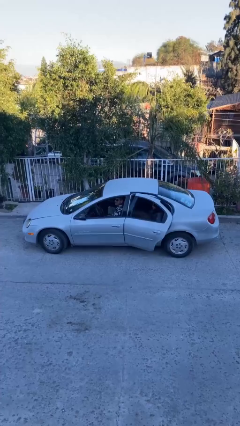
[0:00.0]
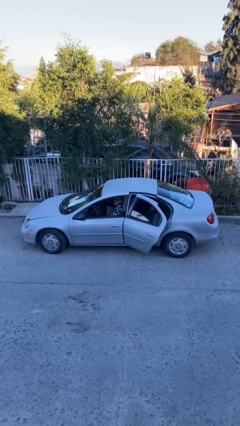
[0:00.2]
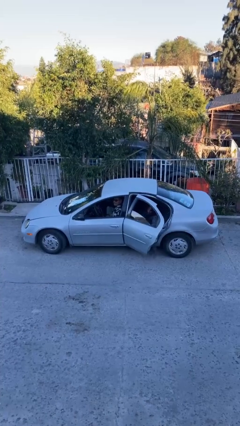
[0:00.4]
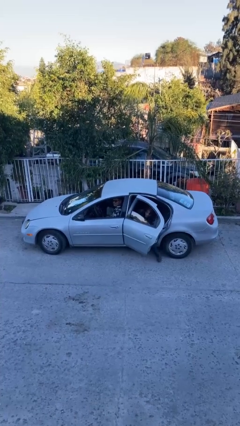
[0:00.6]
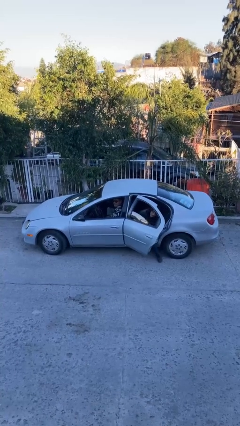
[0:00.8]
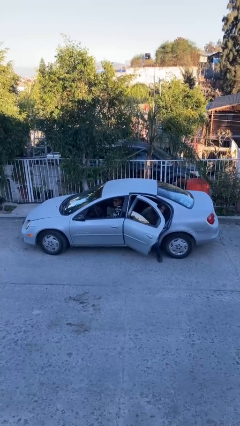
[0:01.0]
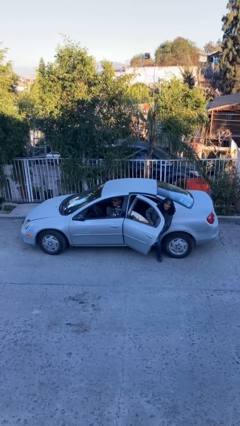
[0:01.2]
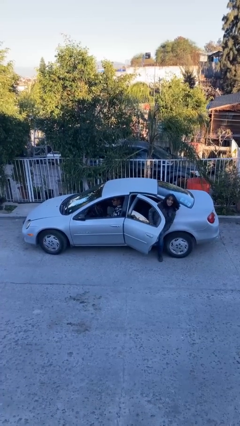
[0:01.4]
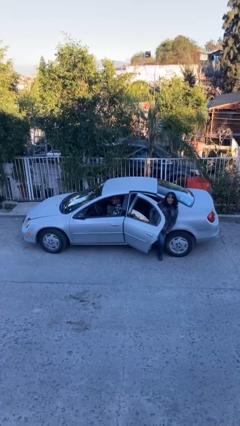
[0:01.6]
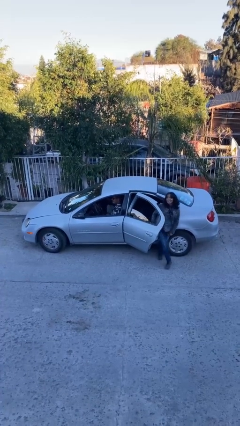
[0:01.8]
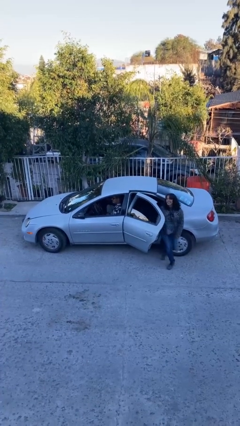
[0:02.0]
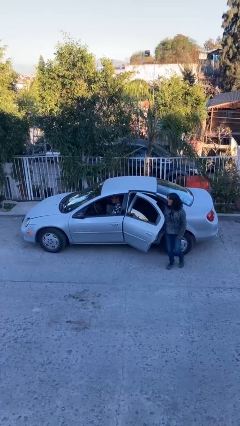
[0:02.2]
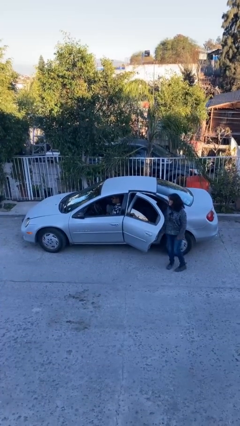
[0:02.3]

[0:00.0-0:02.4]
car drops off person

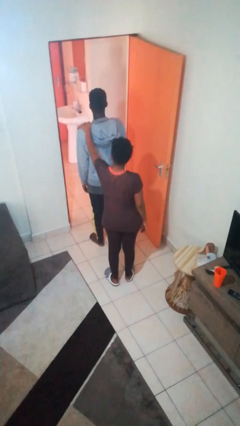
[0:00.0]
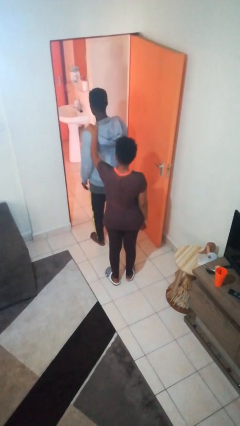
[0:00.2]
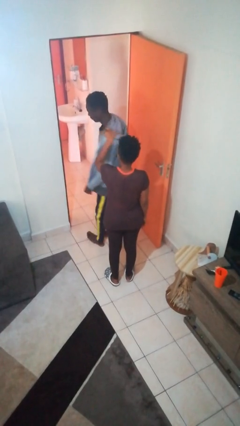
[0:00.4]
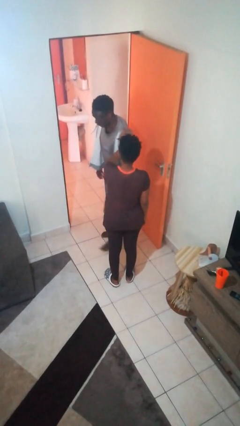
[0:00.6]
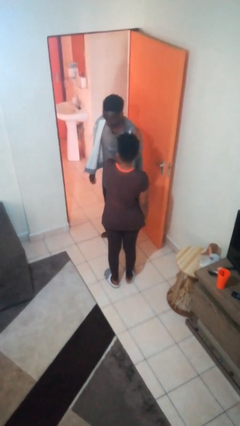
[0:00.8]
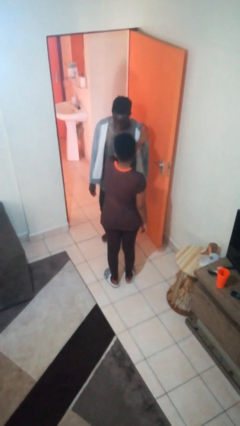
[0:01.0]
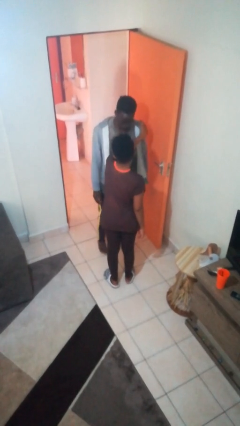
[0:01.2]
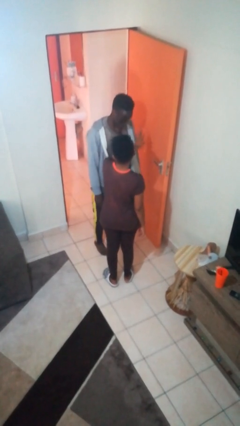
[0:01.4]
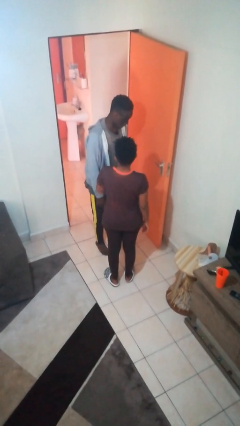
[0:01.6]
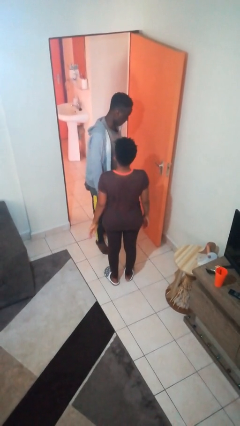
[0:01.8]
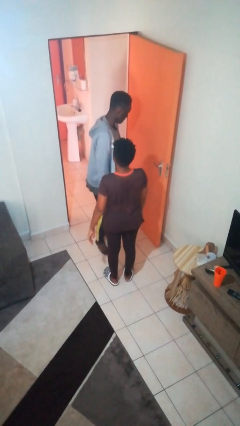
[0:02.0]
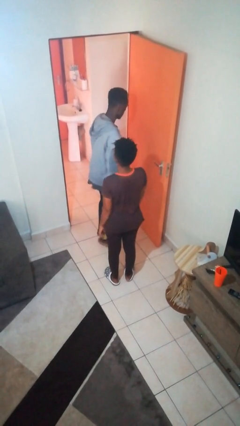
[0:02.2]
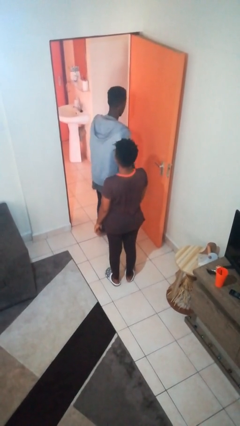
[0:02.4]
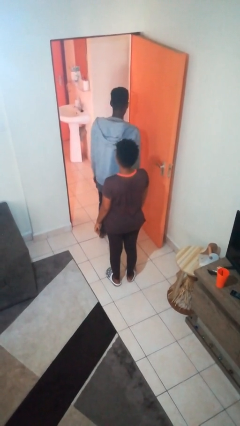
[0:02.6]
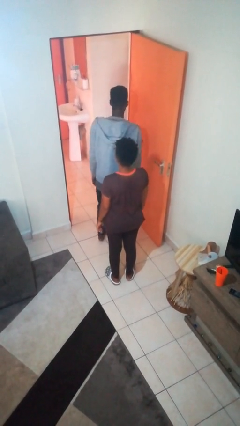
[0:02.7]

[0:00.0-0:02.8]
person spins person around

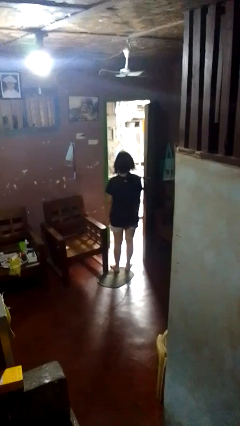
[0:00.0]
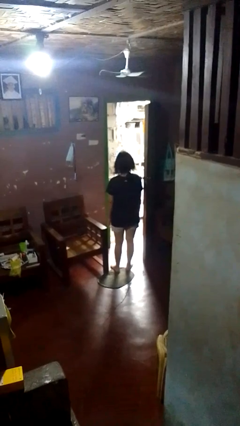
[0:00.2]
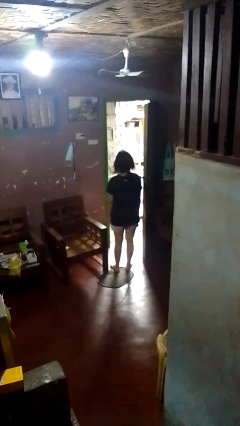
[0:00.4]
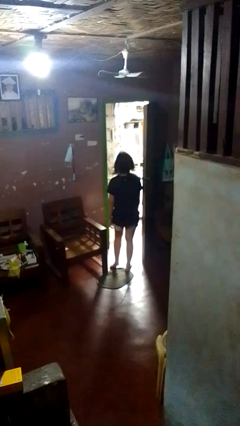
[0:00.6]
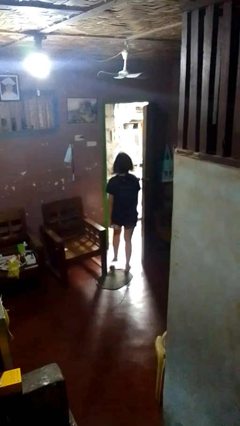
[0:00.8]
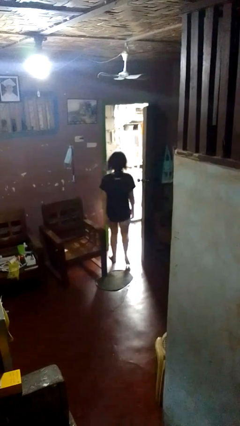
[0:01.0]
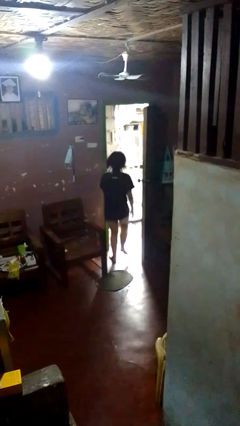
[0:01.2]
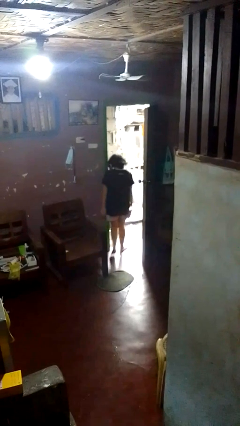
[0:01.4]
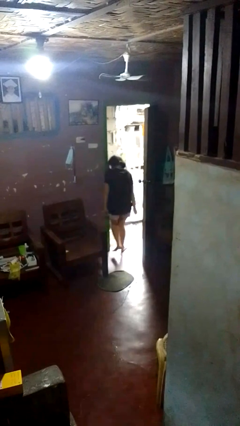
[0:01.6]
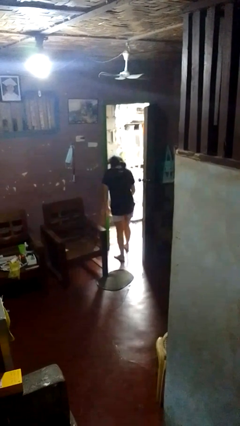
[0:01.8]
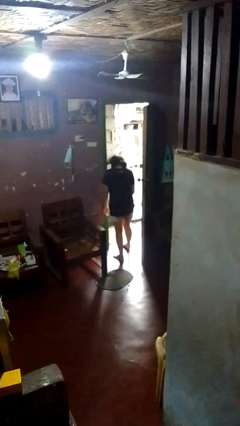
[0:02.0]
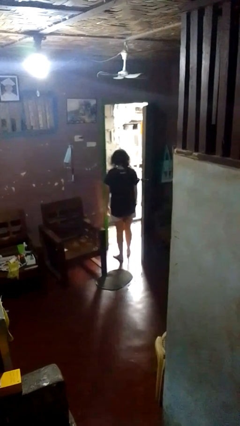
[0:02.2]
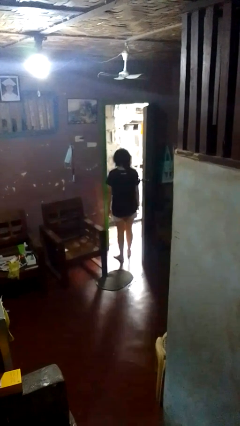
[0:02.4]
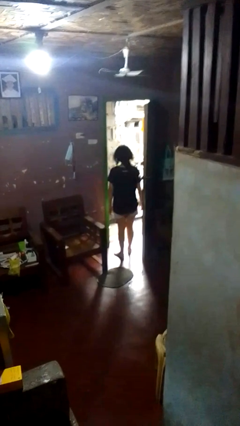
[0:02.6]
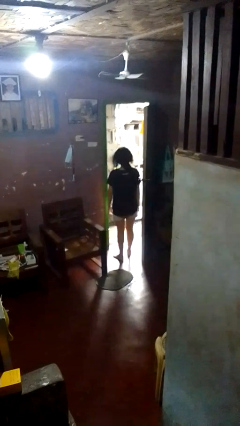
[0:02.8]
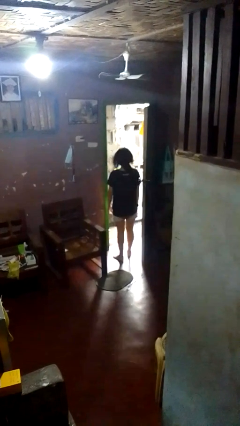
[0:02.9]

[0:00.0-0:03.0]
person bumps into wall

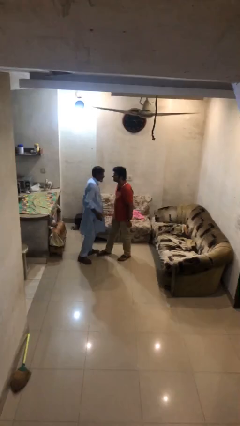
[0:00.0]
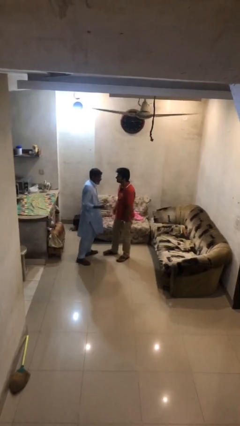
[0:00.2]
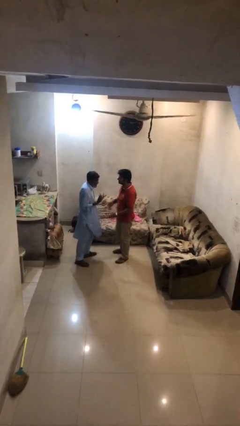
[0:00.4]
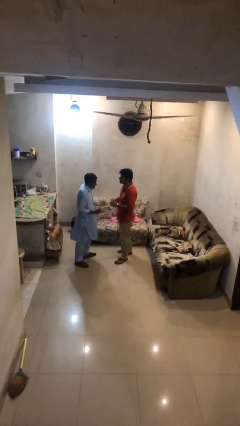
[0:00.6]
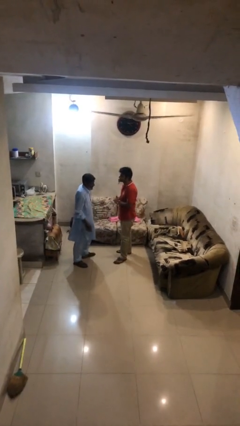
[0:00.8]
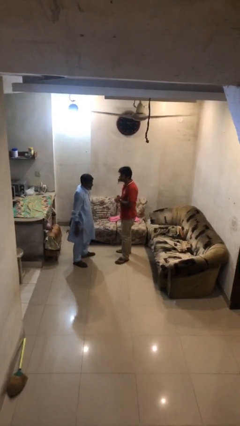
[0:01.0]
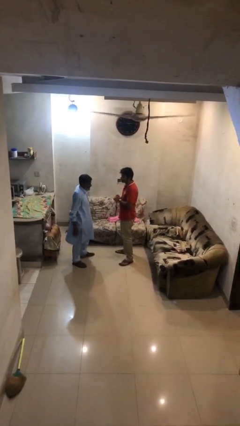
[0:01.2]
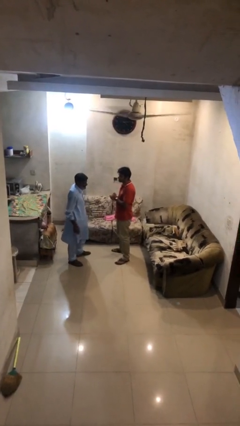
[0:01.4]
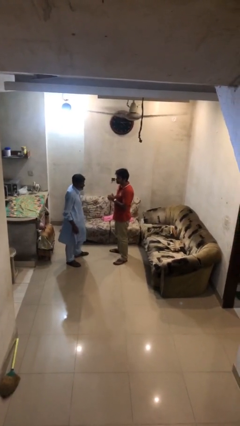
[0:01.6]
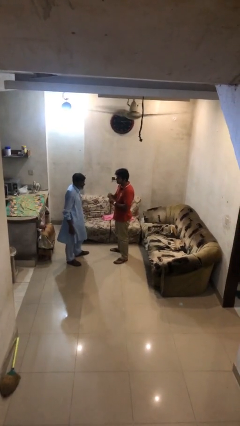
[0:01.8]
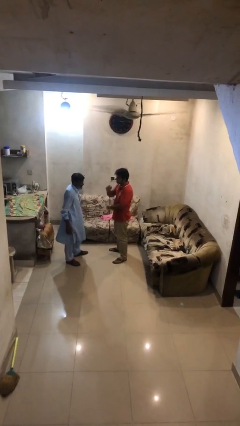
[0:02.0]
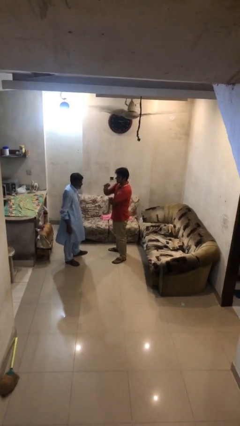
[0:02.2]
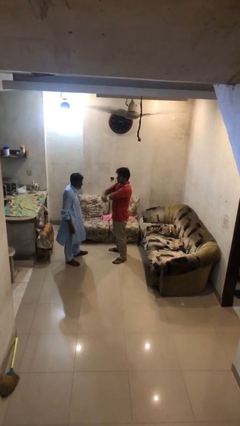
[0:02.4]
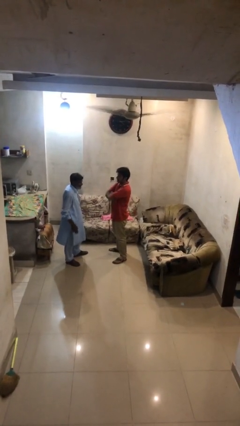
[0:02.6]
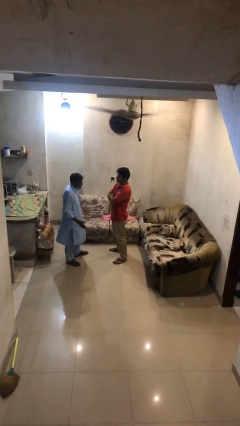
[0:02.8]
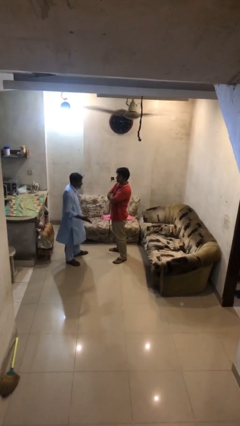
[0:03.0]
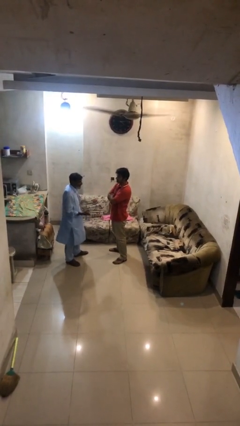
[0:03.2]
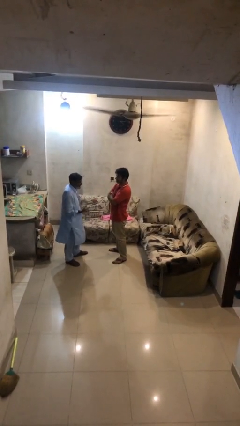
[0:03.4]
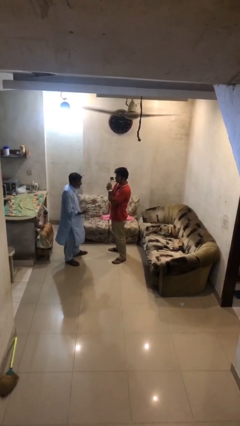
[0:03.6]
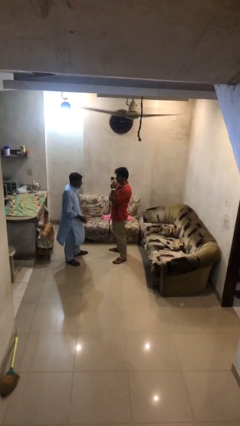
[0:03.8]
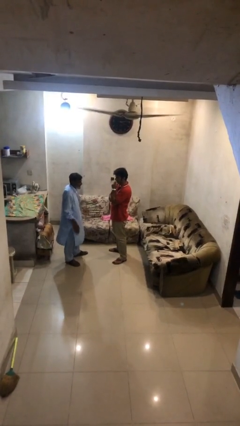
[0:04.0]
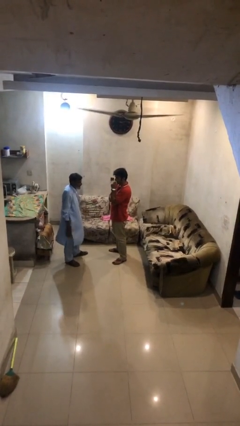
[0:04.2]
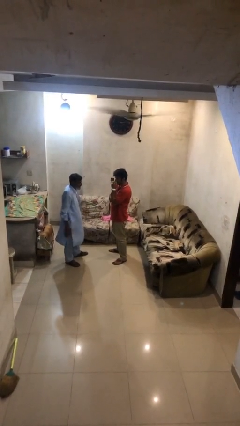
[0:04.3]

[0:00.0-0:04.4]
person talks to person

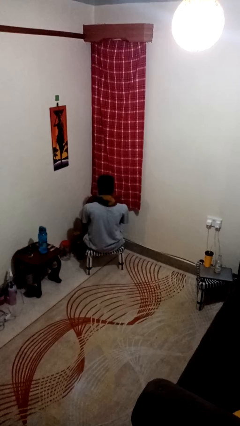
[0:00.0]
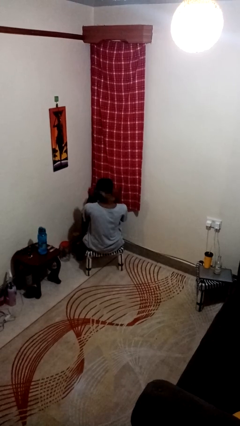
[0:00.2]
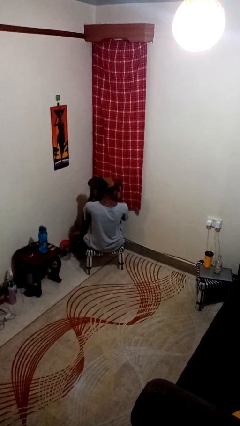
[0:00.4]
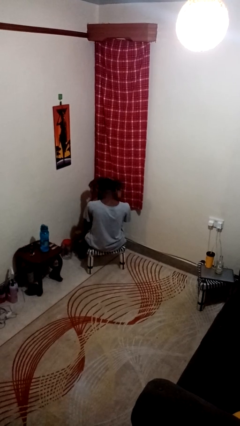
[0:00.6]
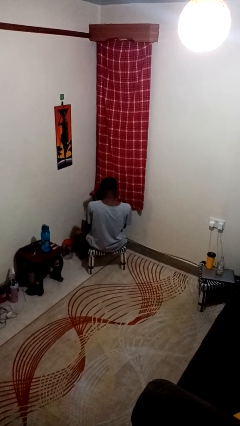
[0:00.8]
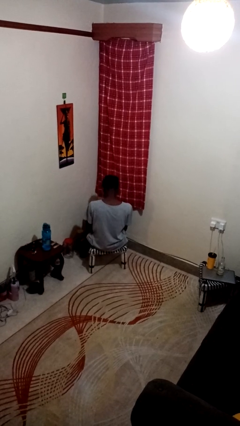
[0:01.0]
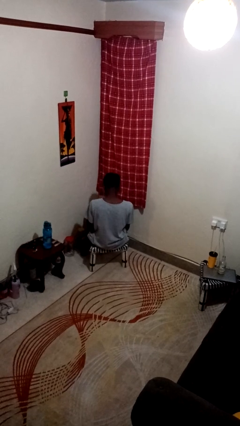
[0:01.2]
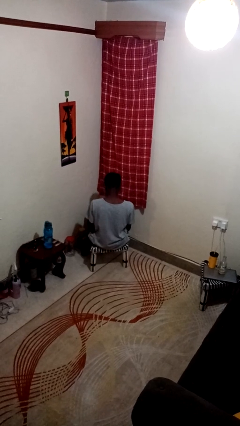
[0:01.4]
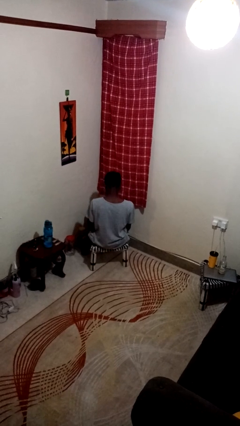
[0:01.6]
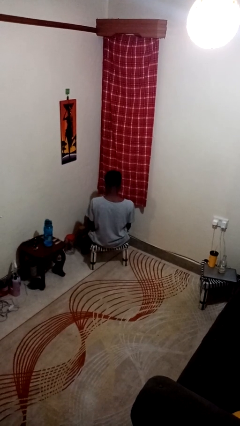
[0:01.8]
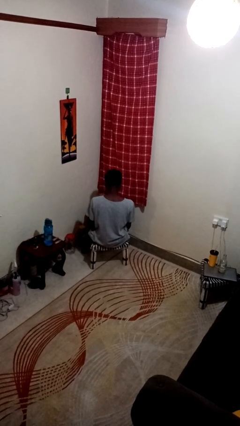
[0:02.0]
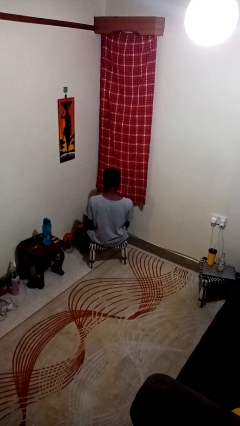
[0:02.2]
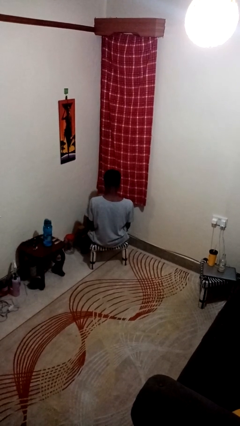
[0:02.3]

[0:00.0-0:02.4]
person takes off scarf

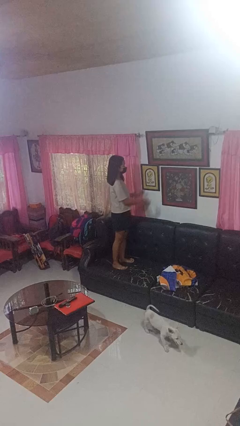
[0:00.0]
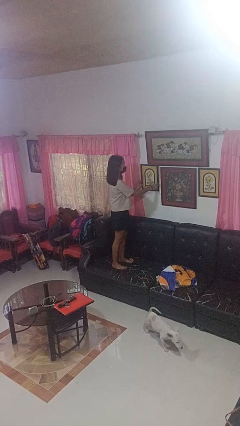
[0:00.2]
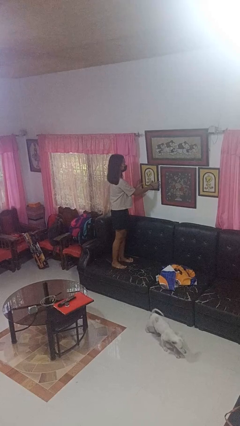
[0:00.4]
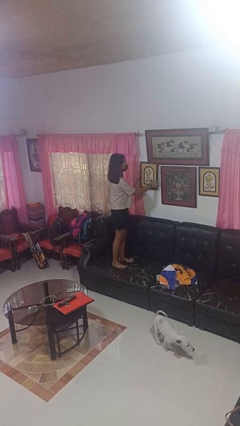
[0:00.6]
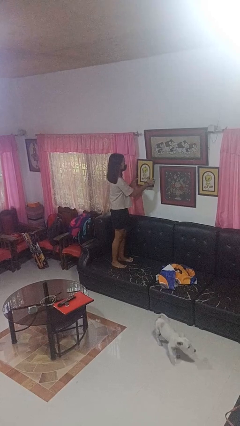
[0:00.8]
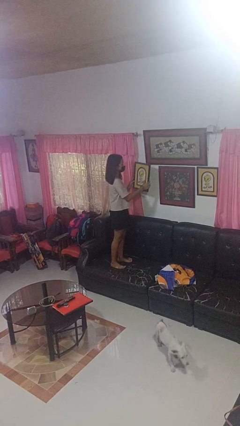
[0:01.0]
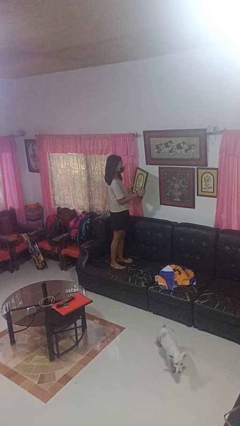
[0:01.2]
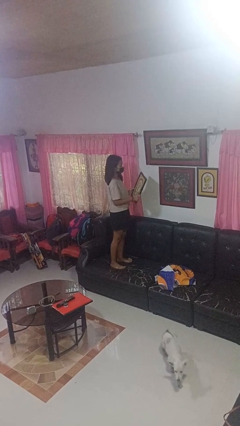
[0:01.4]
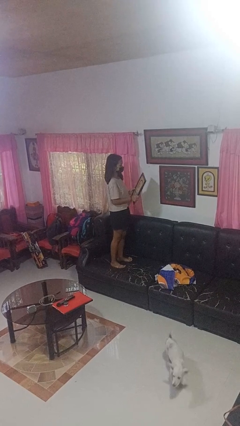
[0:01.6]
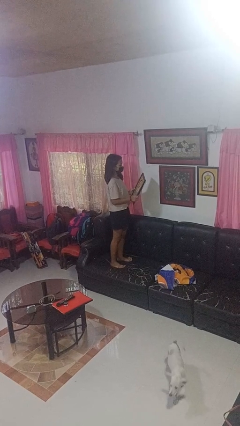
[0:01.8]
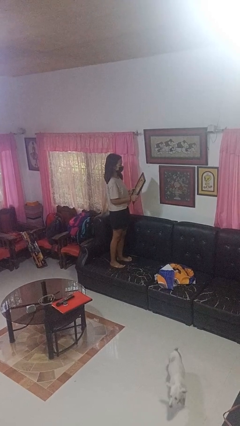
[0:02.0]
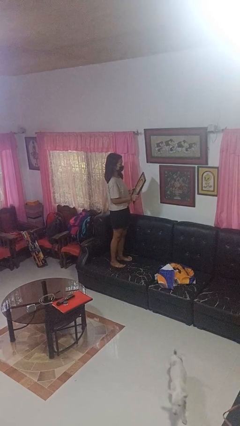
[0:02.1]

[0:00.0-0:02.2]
person takes down picture frame
